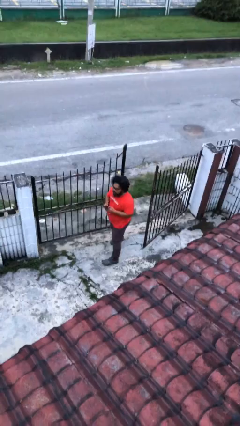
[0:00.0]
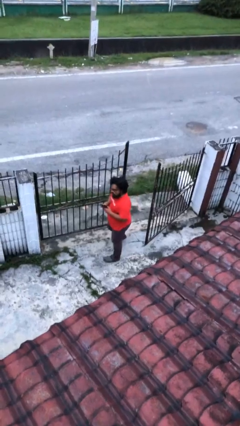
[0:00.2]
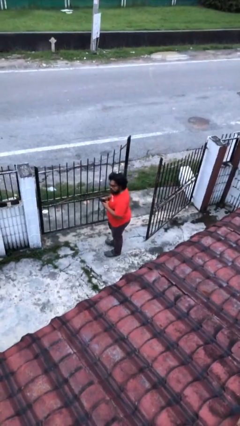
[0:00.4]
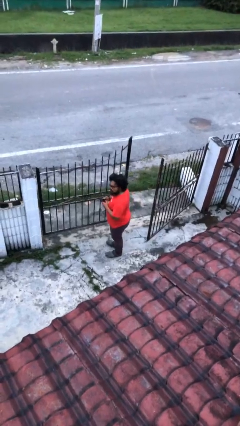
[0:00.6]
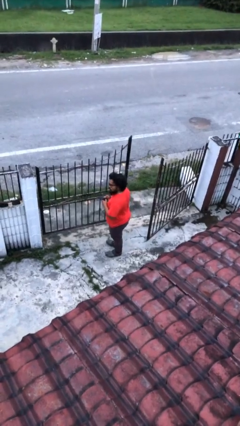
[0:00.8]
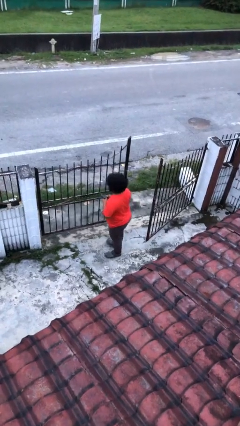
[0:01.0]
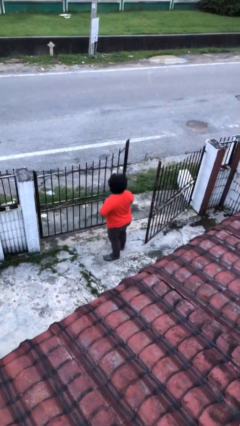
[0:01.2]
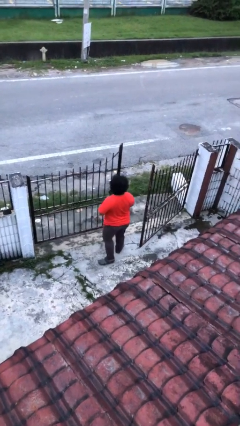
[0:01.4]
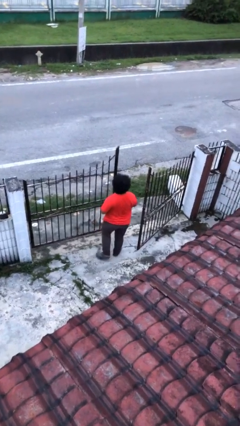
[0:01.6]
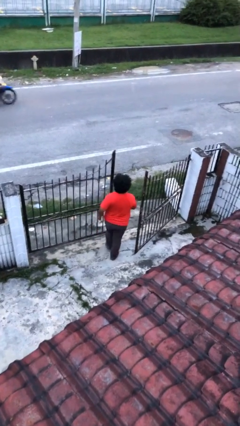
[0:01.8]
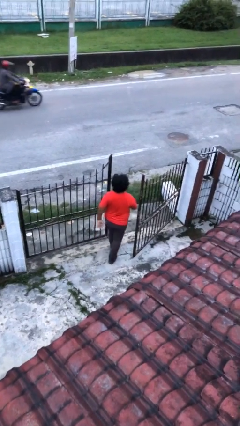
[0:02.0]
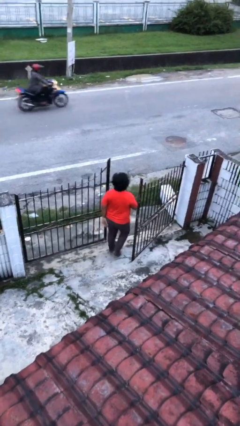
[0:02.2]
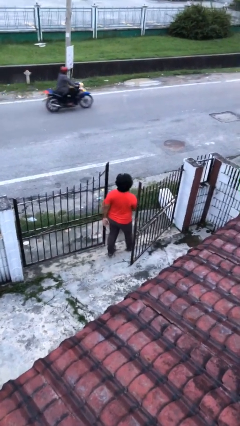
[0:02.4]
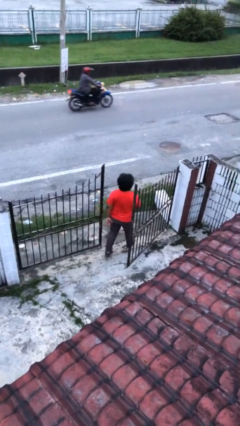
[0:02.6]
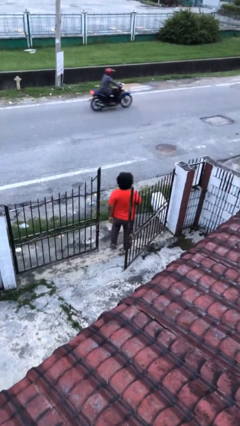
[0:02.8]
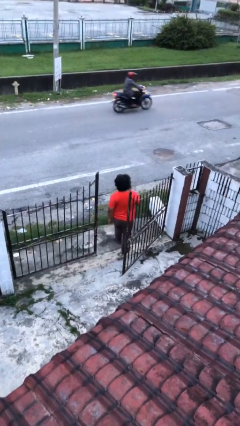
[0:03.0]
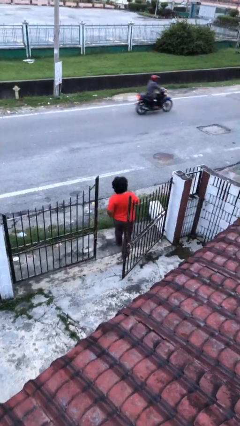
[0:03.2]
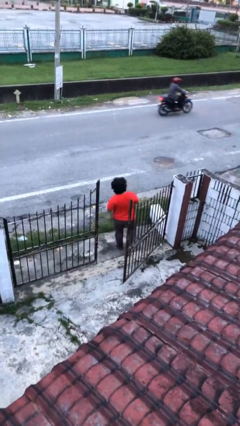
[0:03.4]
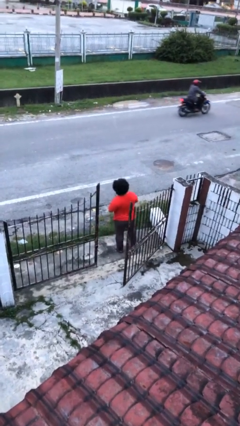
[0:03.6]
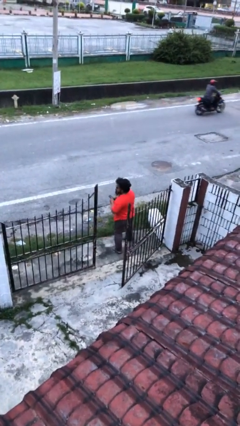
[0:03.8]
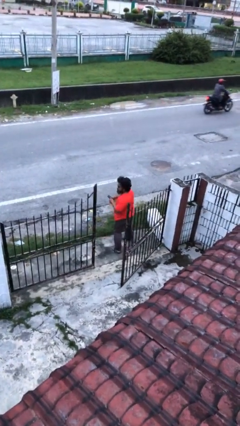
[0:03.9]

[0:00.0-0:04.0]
person exits scene through structure

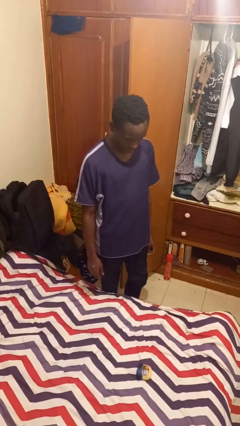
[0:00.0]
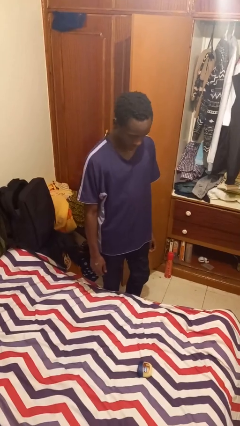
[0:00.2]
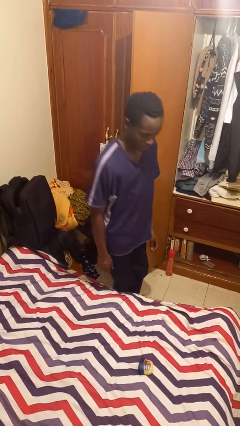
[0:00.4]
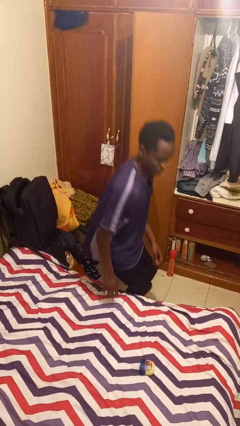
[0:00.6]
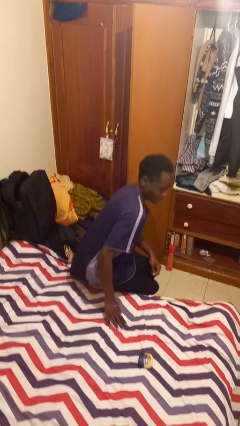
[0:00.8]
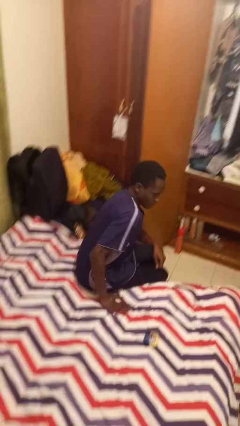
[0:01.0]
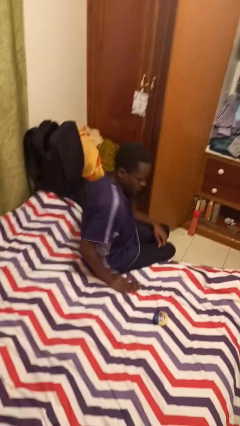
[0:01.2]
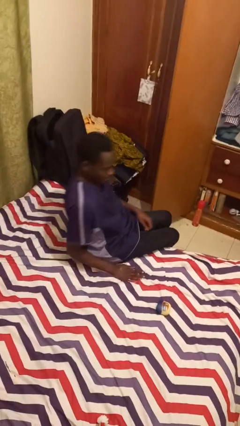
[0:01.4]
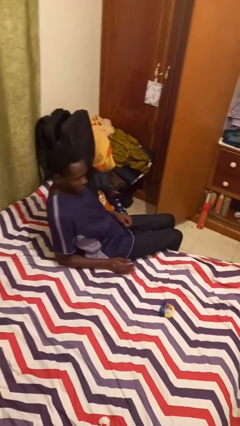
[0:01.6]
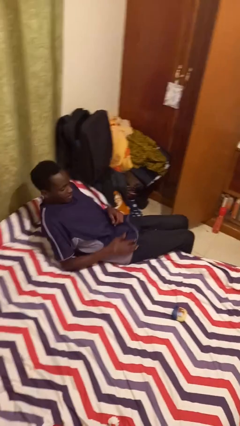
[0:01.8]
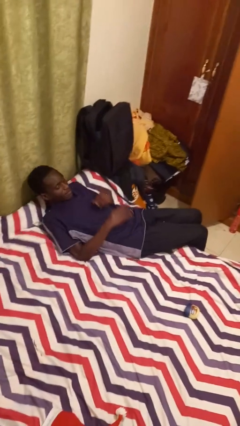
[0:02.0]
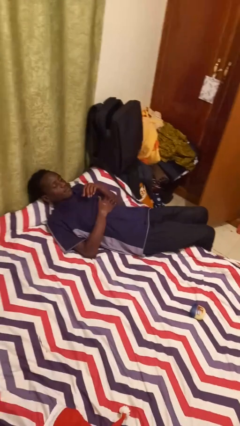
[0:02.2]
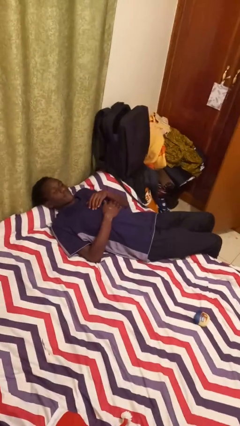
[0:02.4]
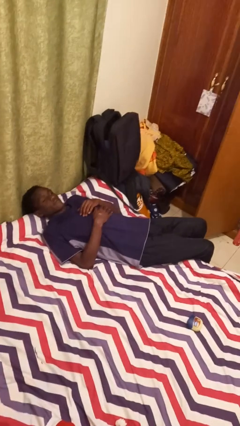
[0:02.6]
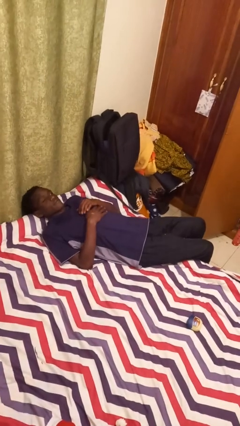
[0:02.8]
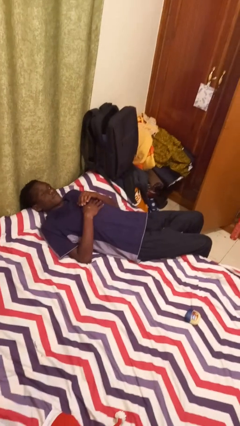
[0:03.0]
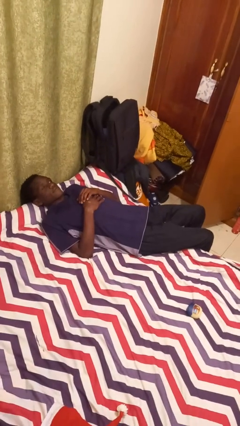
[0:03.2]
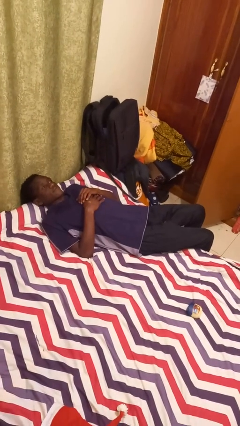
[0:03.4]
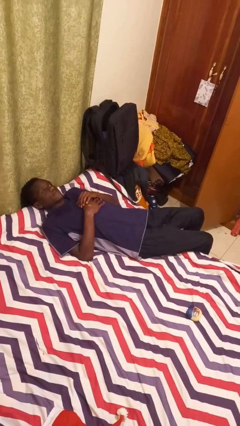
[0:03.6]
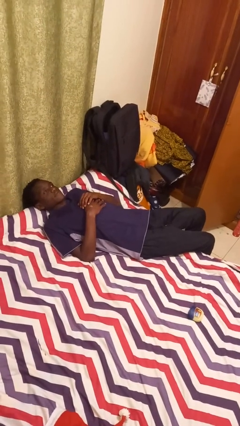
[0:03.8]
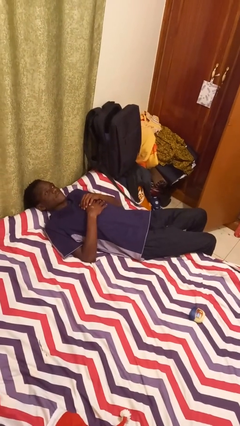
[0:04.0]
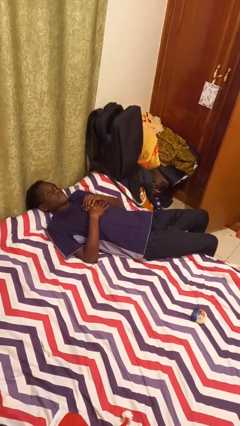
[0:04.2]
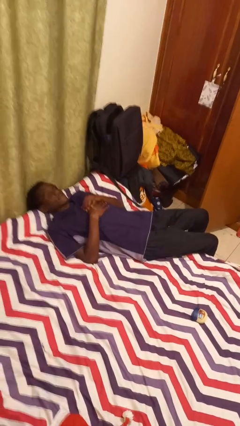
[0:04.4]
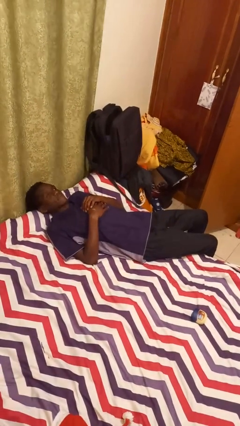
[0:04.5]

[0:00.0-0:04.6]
person lies down on bed

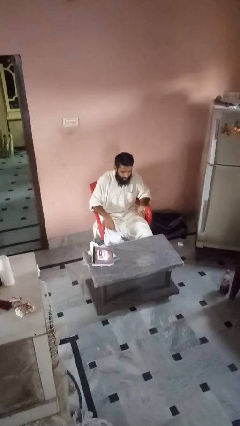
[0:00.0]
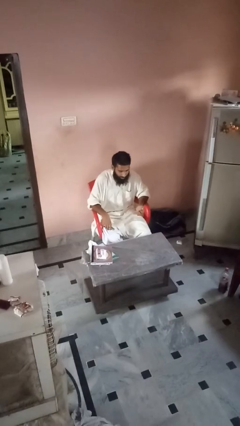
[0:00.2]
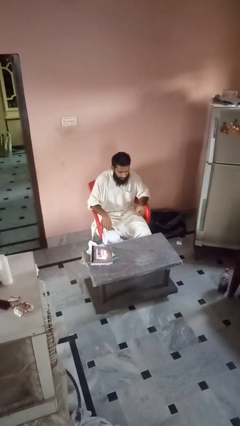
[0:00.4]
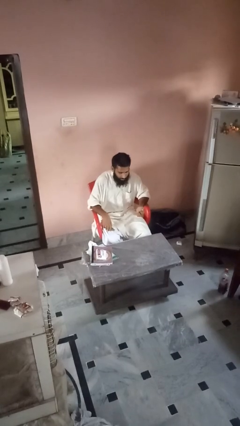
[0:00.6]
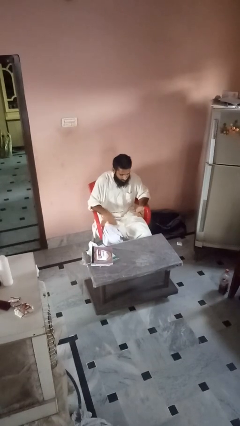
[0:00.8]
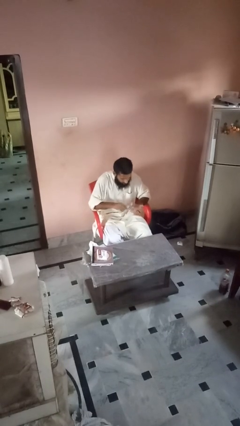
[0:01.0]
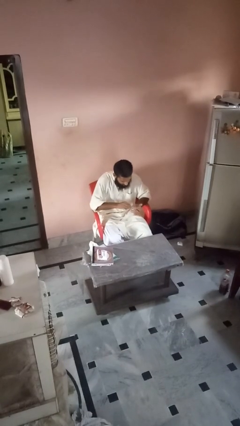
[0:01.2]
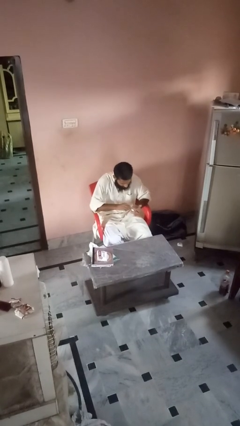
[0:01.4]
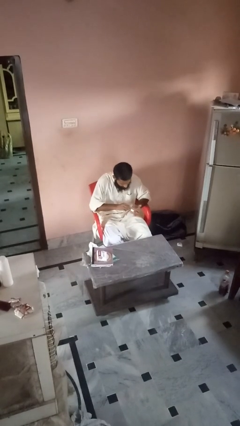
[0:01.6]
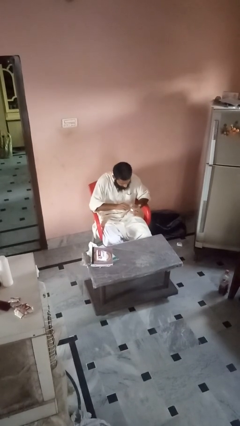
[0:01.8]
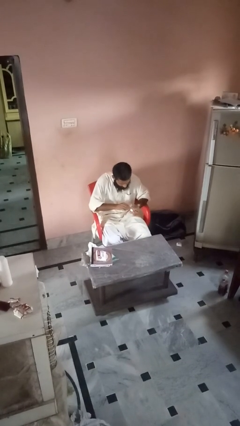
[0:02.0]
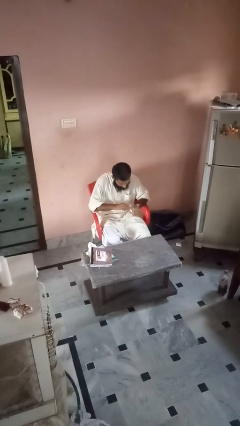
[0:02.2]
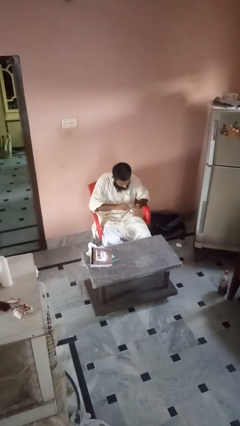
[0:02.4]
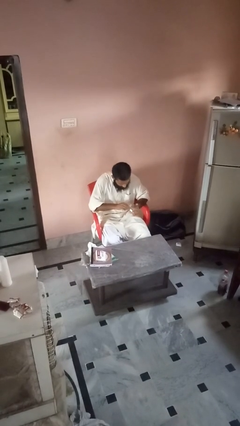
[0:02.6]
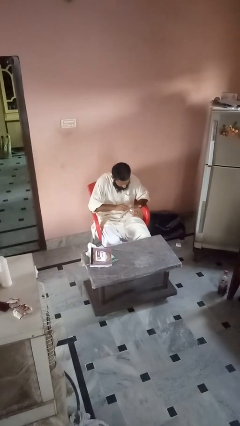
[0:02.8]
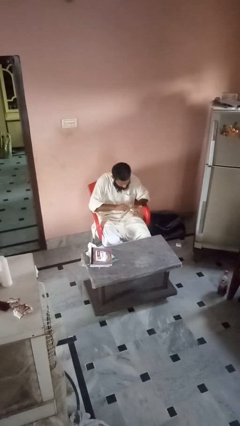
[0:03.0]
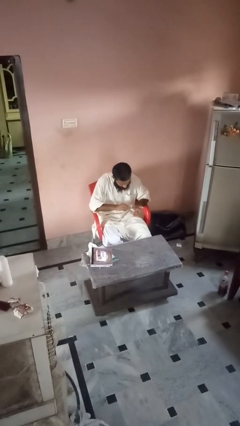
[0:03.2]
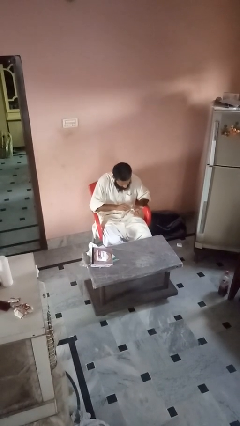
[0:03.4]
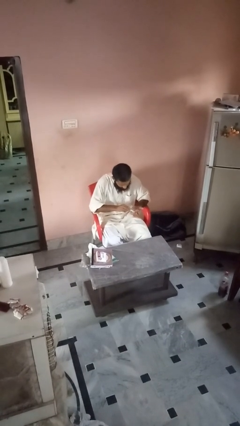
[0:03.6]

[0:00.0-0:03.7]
person clips fingernails

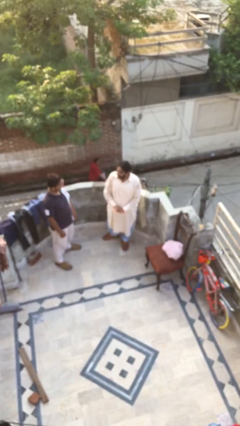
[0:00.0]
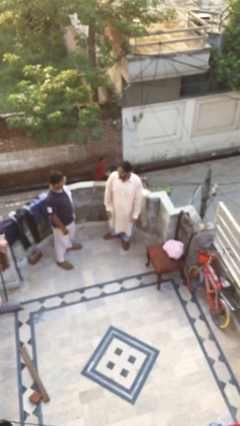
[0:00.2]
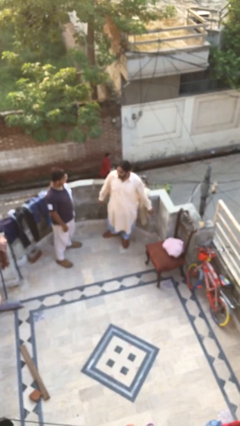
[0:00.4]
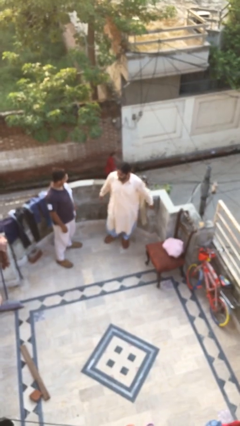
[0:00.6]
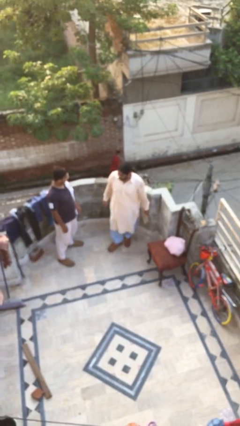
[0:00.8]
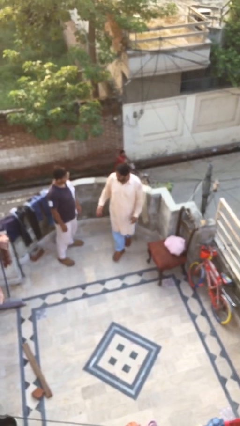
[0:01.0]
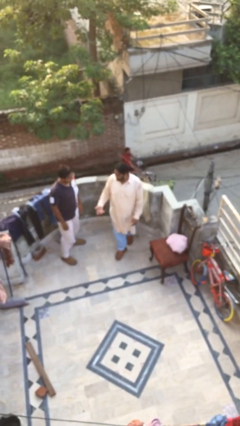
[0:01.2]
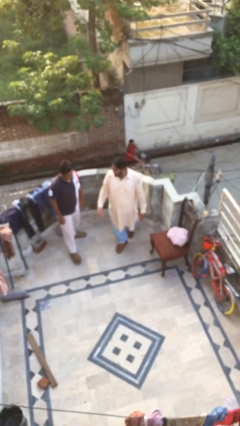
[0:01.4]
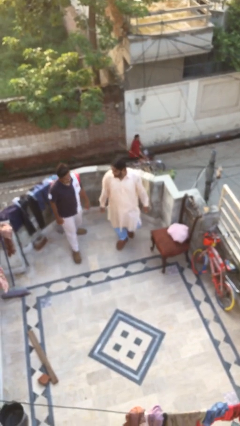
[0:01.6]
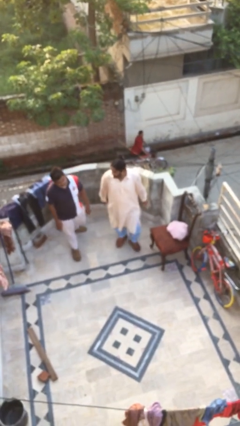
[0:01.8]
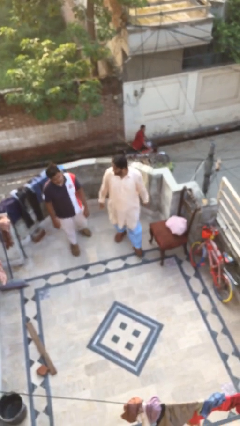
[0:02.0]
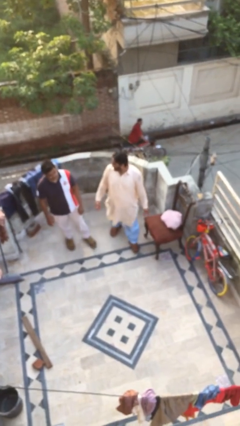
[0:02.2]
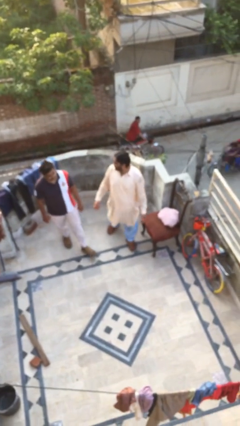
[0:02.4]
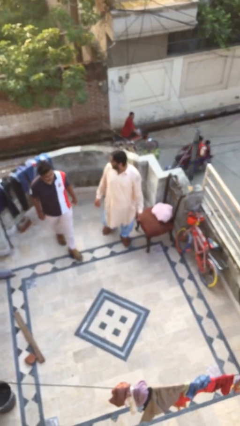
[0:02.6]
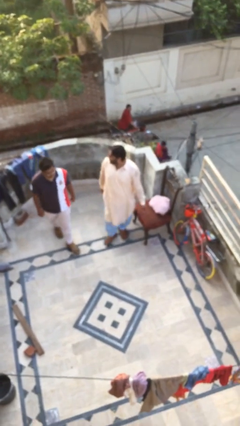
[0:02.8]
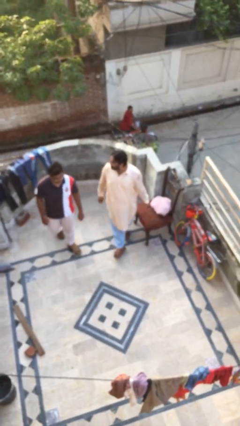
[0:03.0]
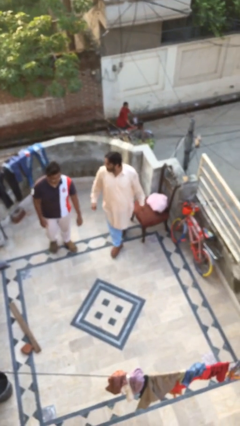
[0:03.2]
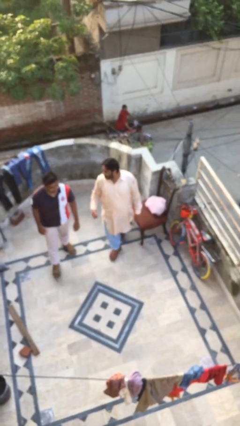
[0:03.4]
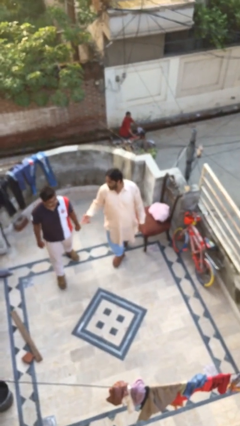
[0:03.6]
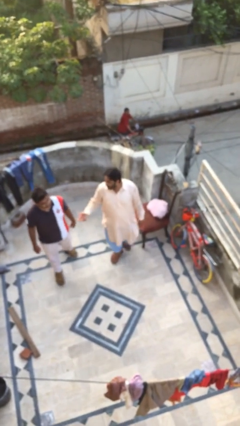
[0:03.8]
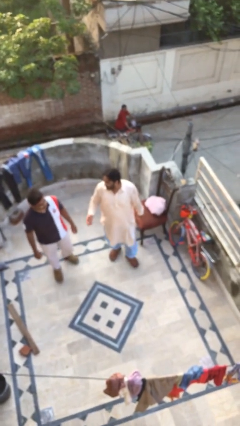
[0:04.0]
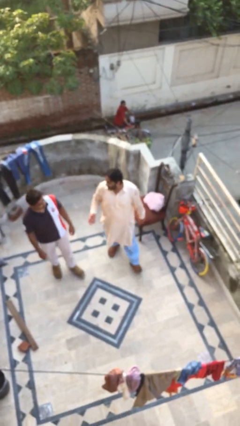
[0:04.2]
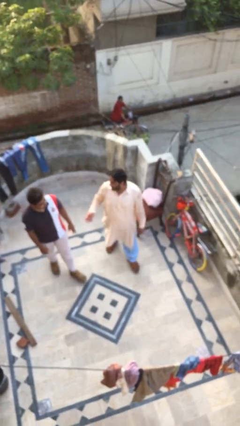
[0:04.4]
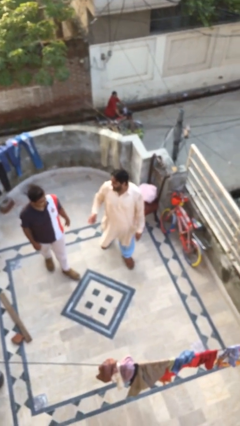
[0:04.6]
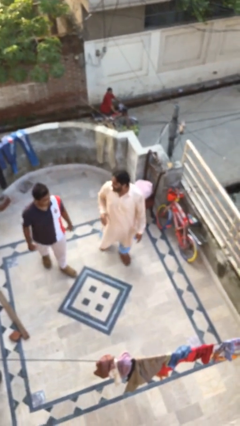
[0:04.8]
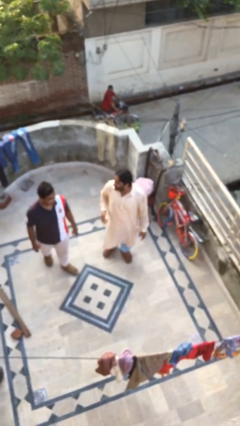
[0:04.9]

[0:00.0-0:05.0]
person talks to person

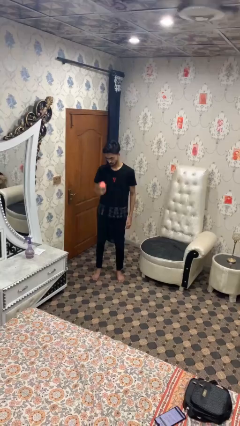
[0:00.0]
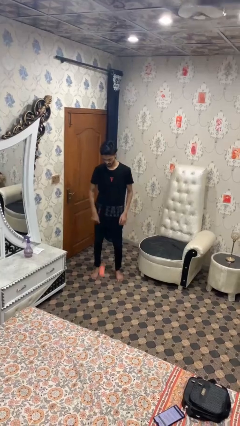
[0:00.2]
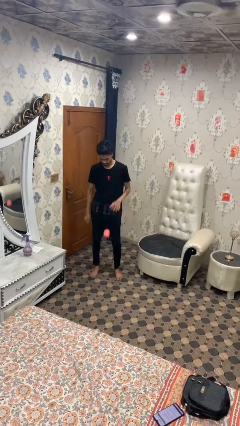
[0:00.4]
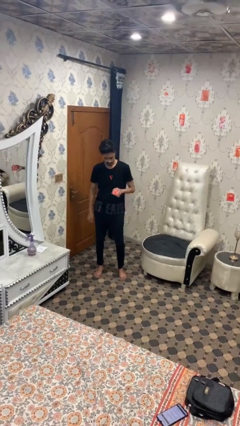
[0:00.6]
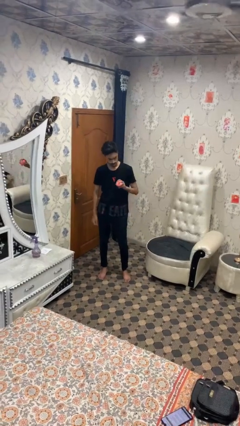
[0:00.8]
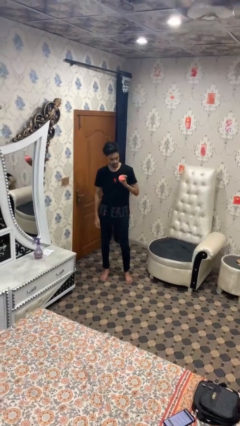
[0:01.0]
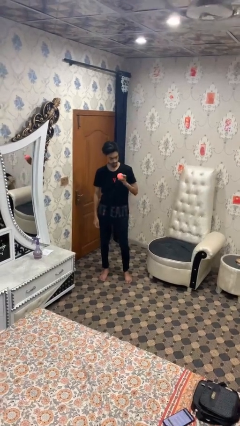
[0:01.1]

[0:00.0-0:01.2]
person bounces ball on floor
